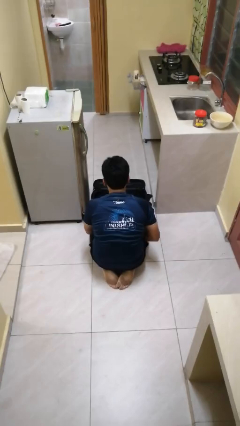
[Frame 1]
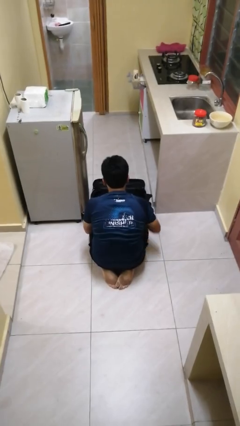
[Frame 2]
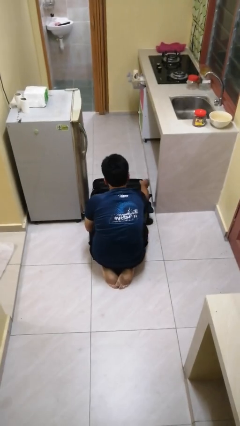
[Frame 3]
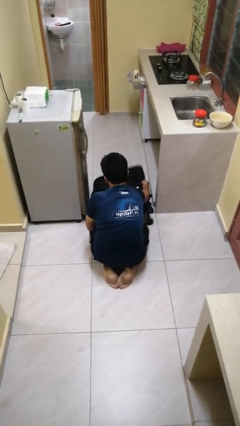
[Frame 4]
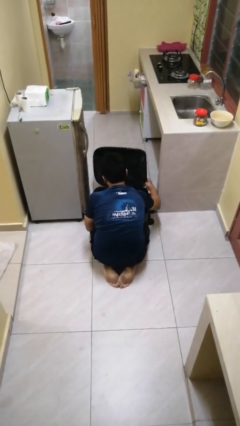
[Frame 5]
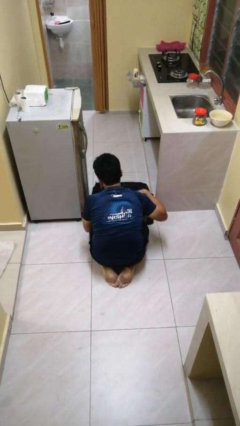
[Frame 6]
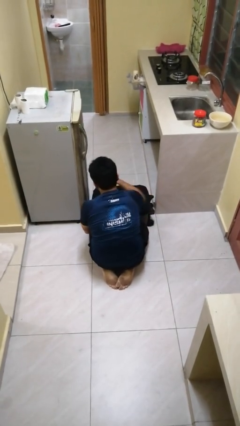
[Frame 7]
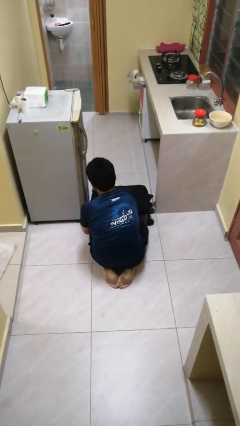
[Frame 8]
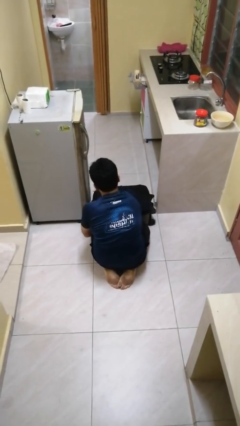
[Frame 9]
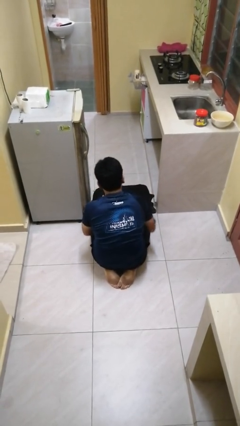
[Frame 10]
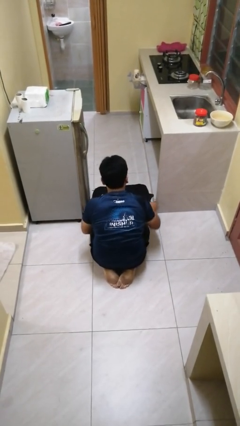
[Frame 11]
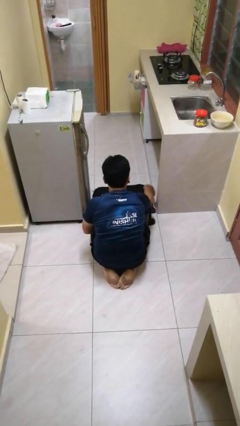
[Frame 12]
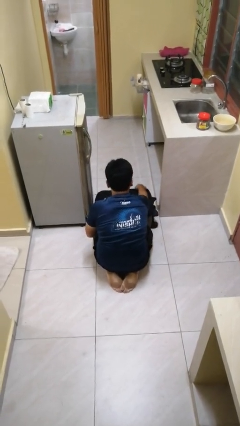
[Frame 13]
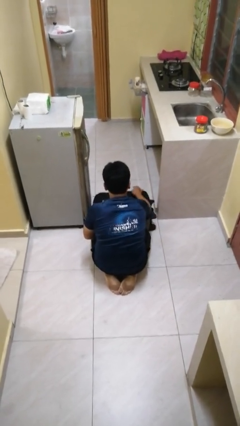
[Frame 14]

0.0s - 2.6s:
person closes suitcase

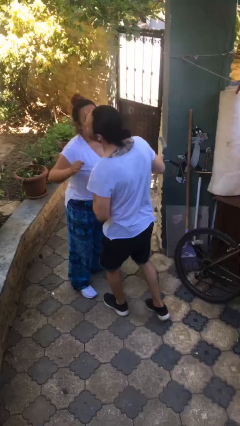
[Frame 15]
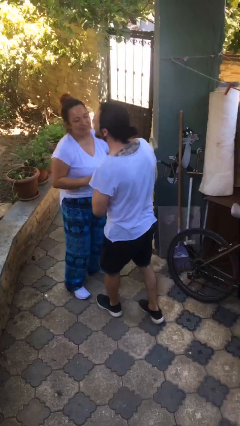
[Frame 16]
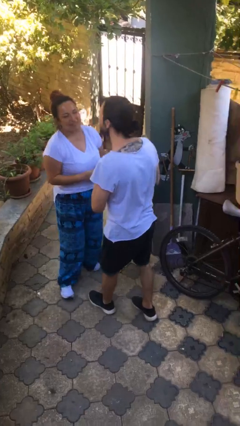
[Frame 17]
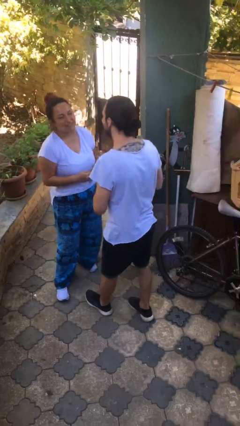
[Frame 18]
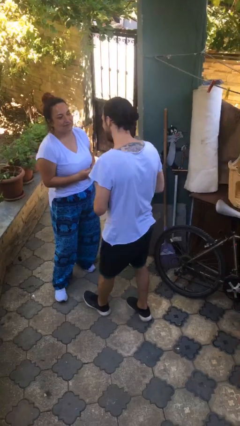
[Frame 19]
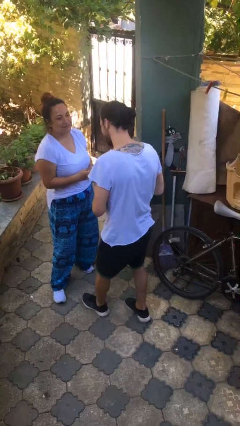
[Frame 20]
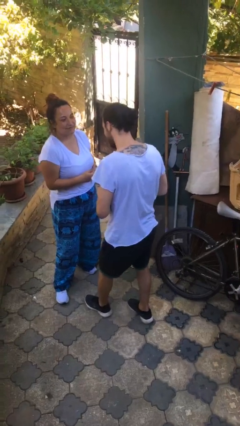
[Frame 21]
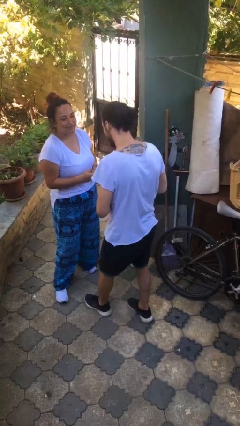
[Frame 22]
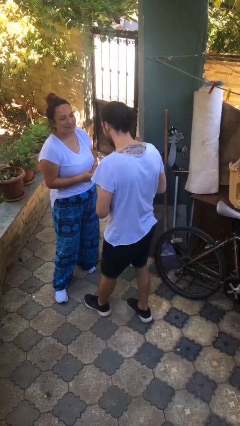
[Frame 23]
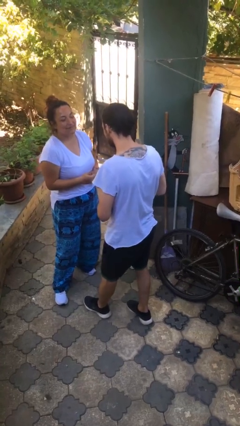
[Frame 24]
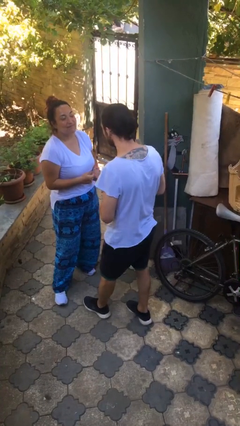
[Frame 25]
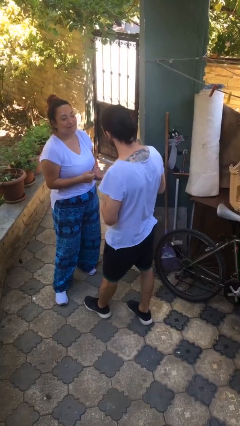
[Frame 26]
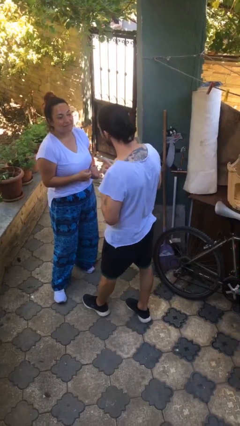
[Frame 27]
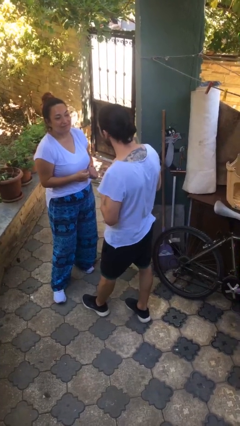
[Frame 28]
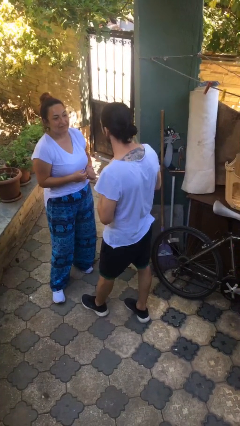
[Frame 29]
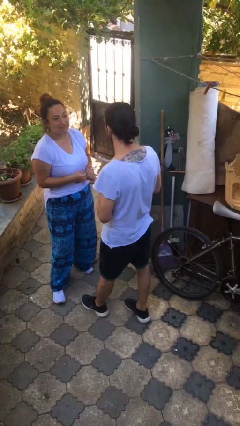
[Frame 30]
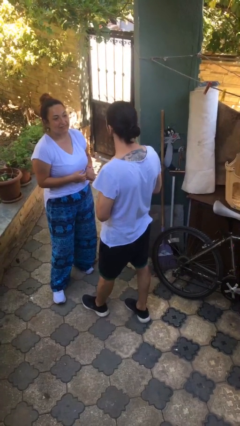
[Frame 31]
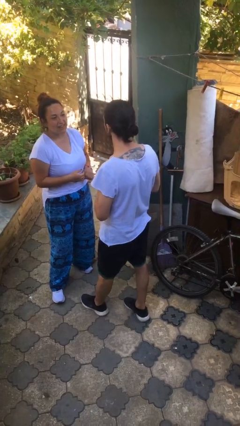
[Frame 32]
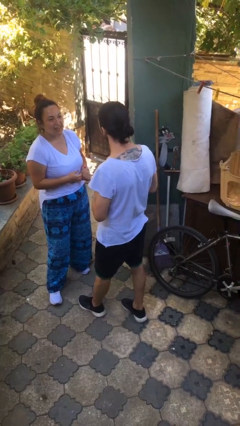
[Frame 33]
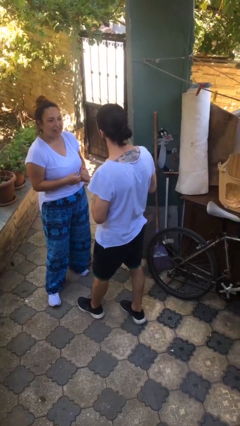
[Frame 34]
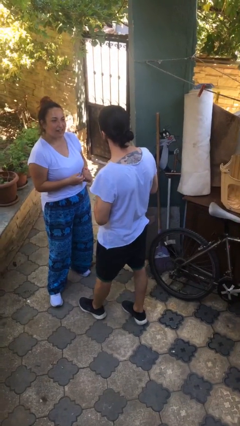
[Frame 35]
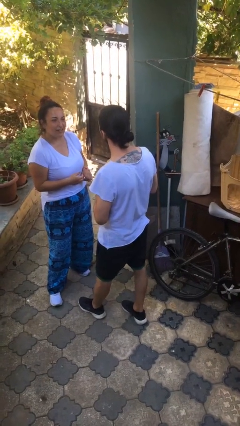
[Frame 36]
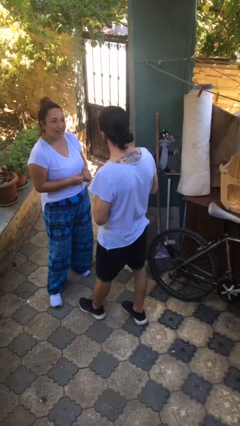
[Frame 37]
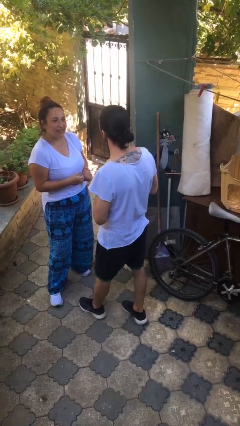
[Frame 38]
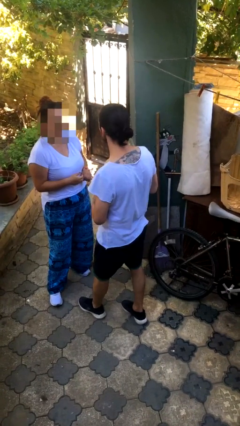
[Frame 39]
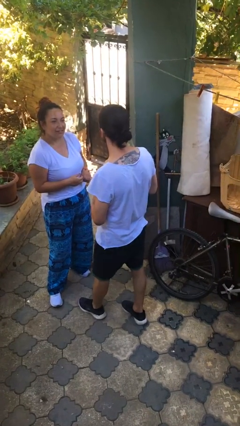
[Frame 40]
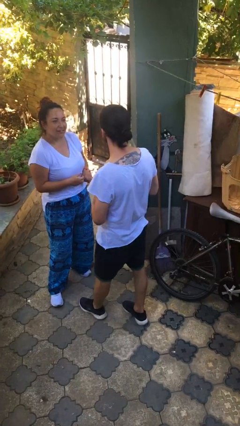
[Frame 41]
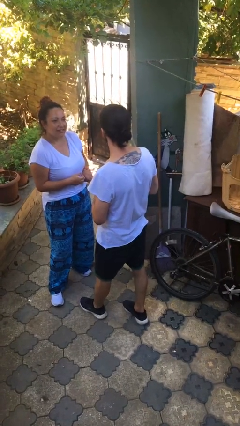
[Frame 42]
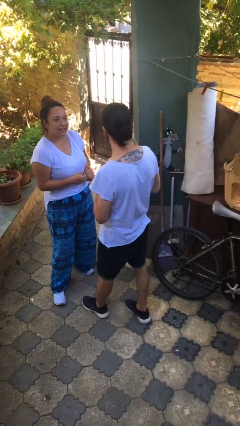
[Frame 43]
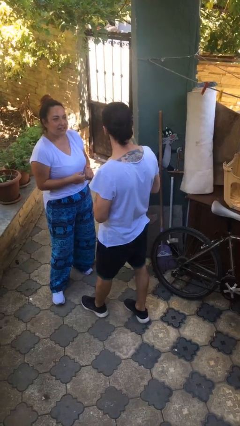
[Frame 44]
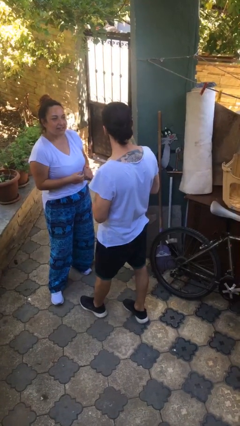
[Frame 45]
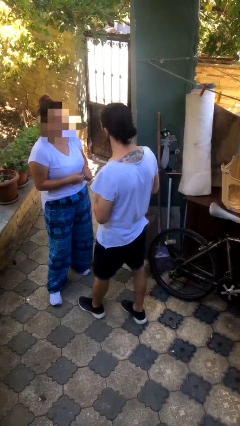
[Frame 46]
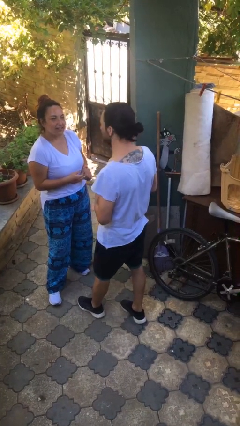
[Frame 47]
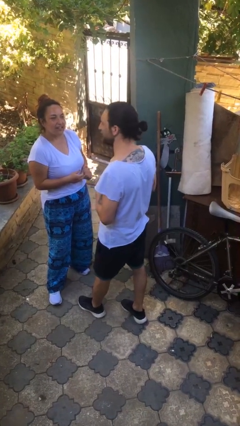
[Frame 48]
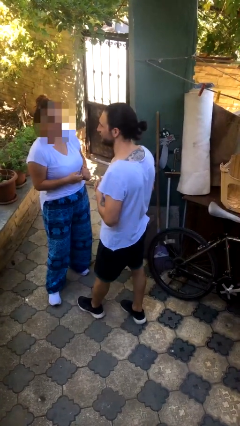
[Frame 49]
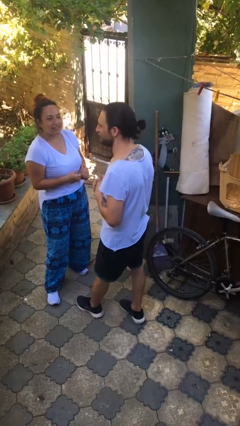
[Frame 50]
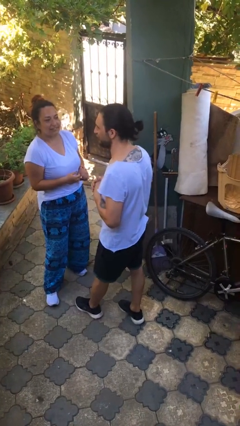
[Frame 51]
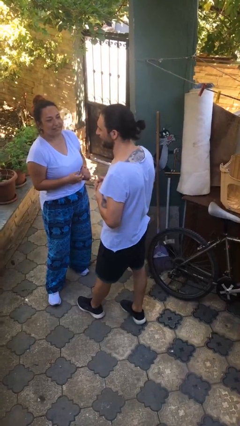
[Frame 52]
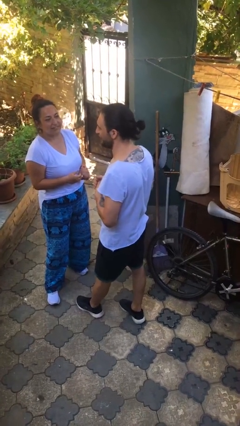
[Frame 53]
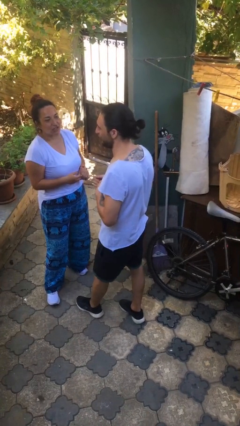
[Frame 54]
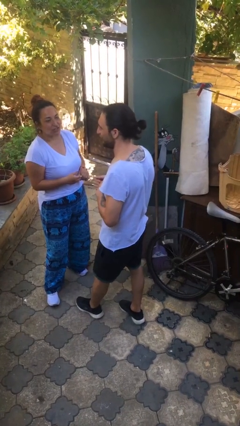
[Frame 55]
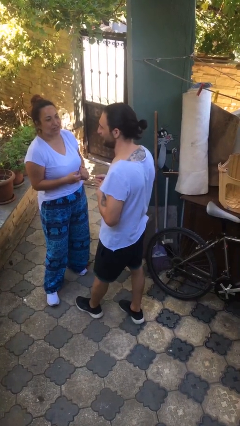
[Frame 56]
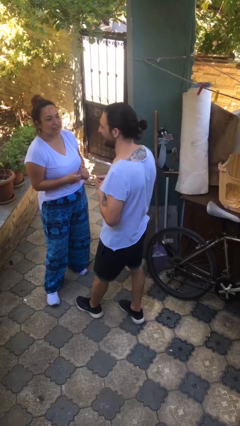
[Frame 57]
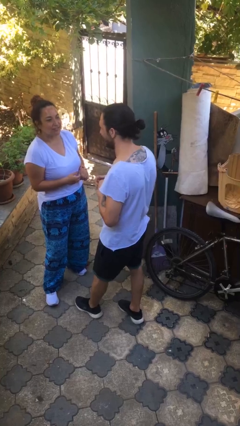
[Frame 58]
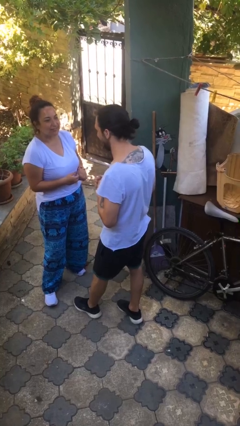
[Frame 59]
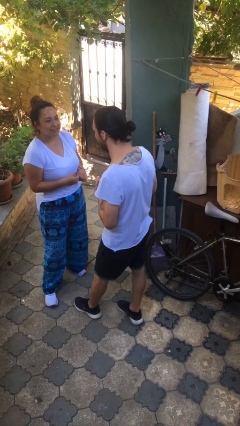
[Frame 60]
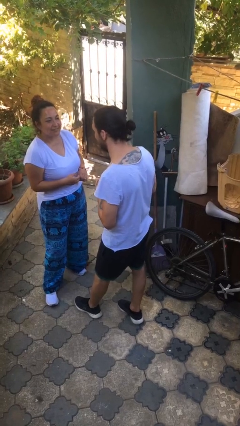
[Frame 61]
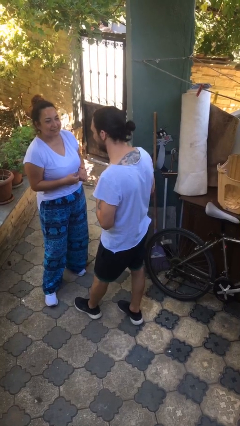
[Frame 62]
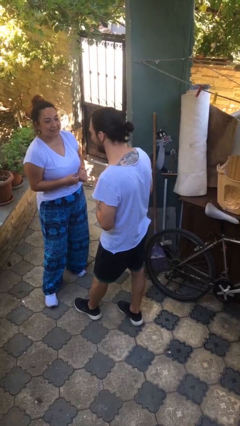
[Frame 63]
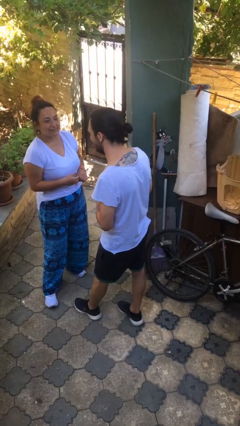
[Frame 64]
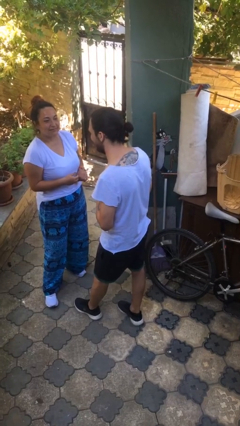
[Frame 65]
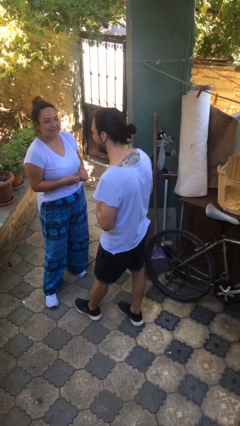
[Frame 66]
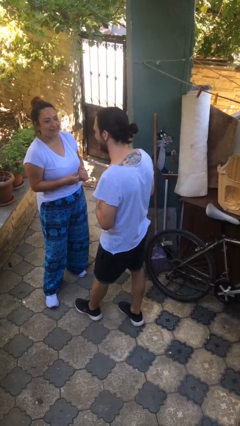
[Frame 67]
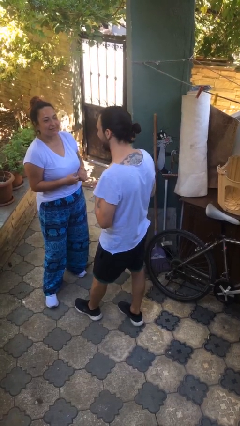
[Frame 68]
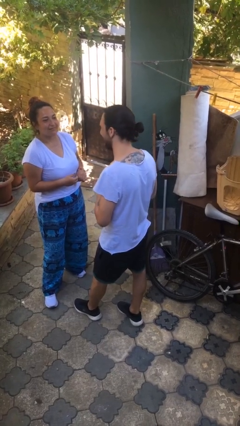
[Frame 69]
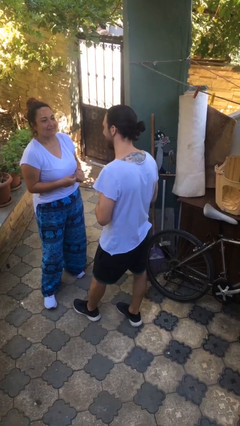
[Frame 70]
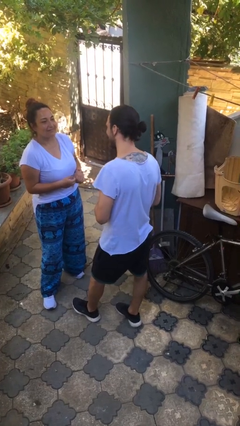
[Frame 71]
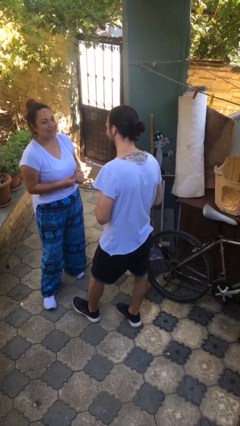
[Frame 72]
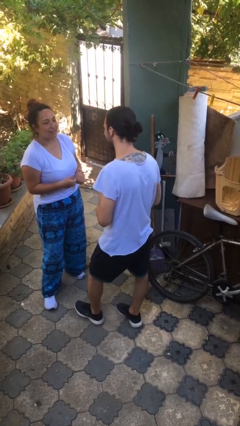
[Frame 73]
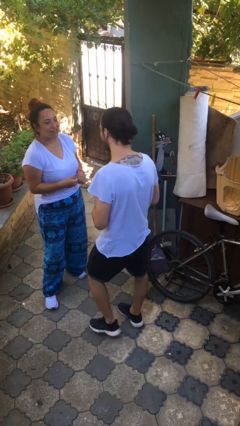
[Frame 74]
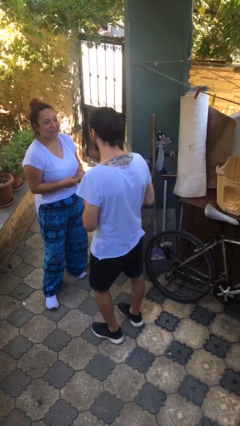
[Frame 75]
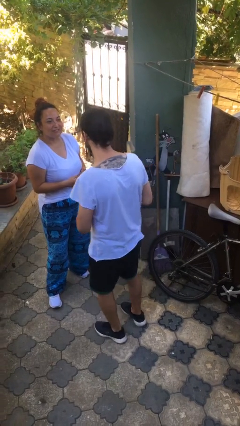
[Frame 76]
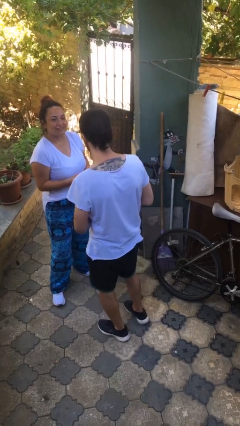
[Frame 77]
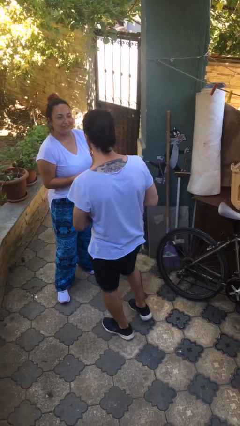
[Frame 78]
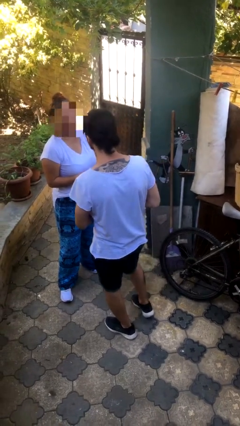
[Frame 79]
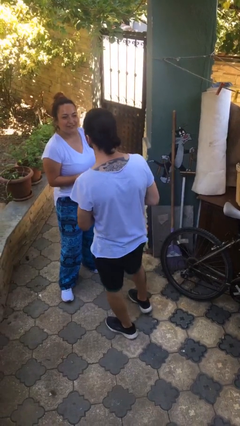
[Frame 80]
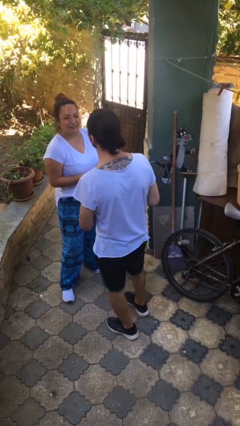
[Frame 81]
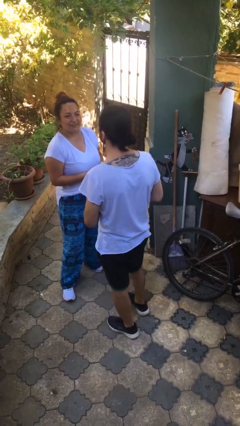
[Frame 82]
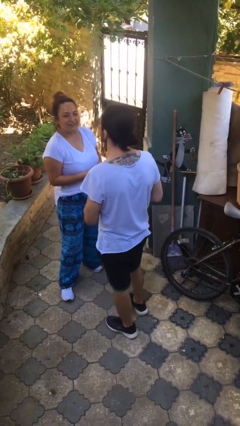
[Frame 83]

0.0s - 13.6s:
person talks to person

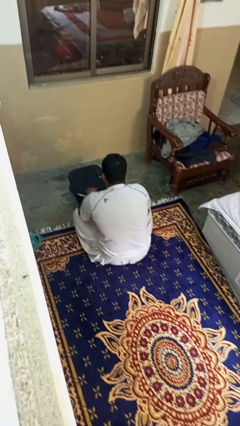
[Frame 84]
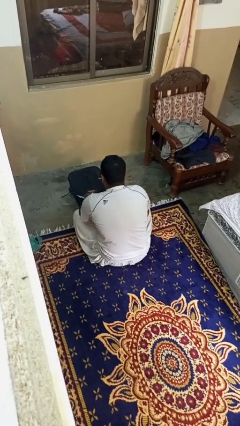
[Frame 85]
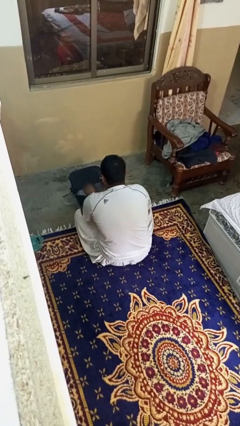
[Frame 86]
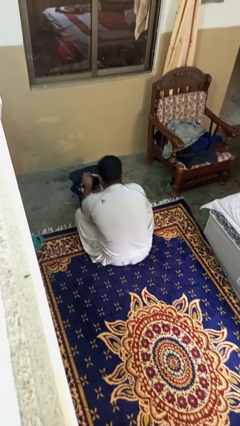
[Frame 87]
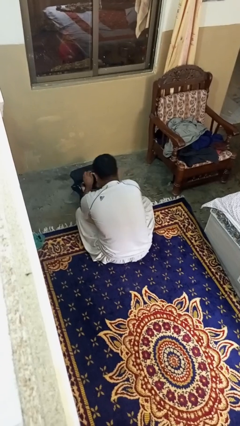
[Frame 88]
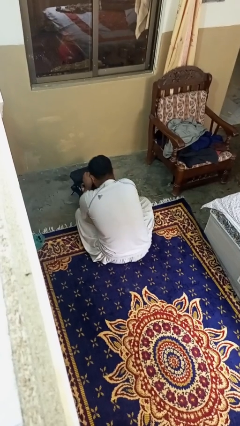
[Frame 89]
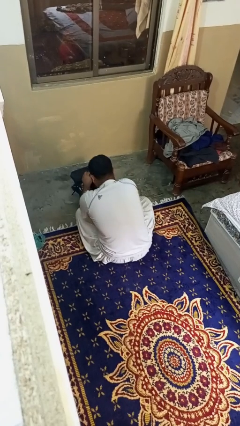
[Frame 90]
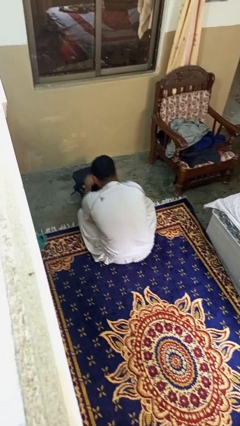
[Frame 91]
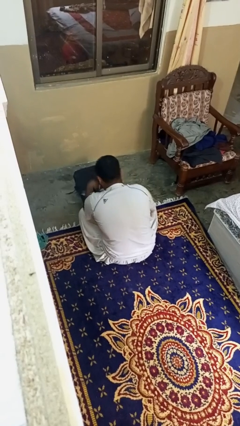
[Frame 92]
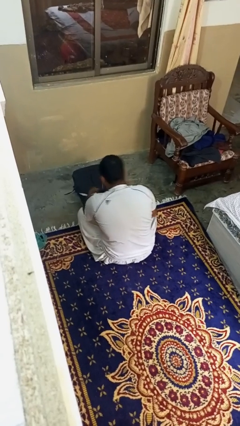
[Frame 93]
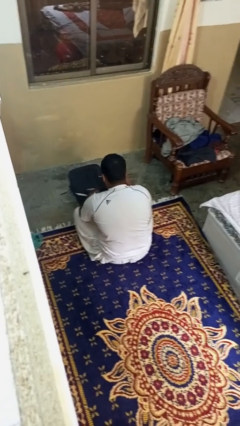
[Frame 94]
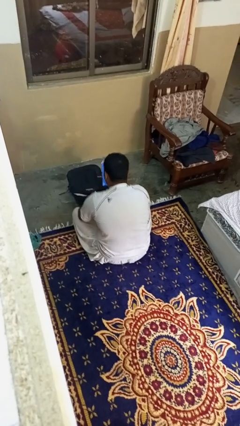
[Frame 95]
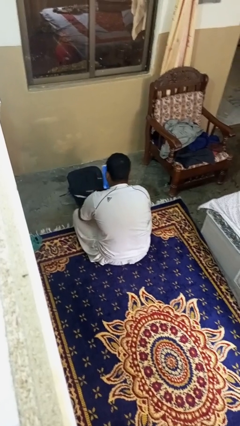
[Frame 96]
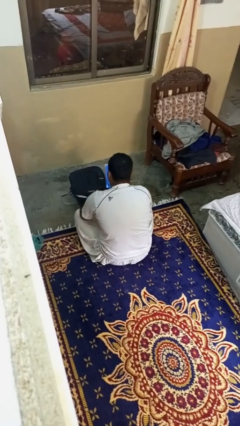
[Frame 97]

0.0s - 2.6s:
person takes object from bag
